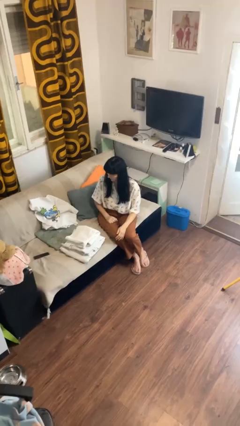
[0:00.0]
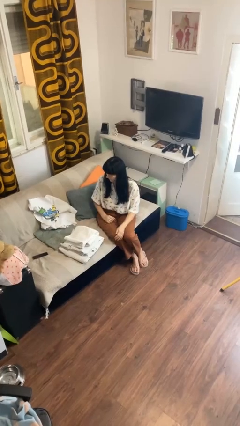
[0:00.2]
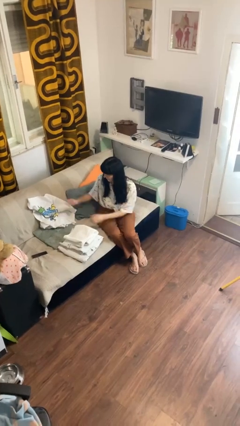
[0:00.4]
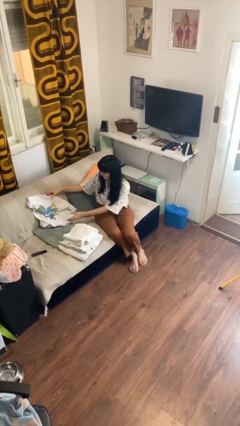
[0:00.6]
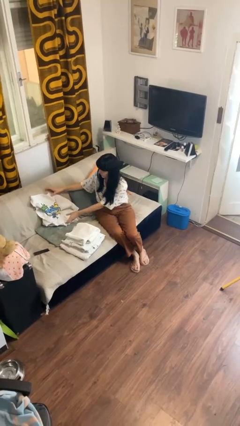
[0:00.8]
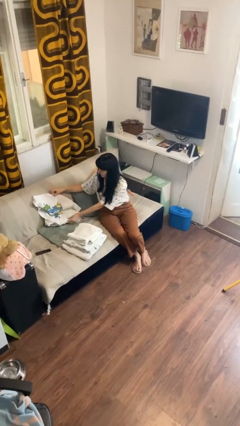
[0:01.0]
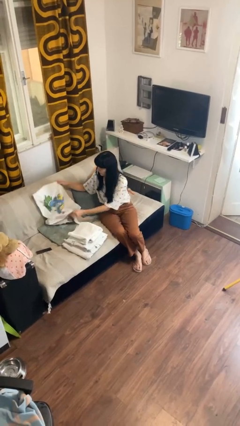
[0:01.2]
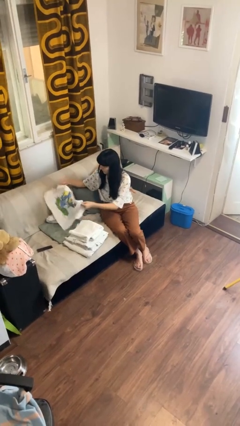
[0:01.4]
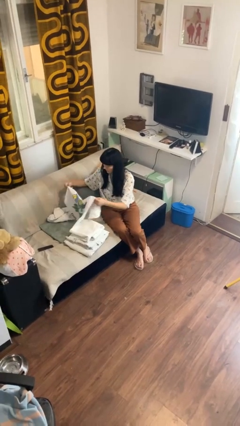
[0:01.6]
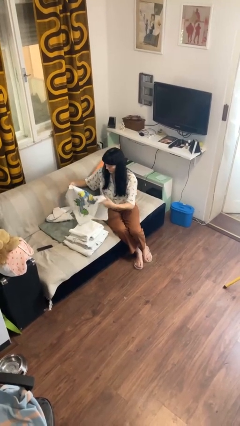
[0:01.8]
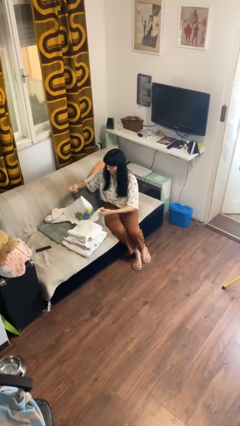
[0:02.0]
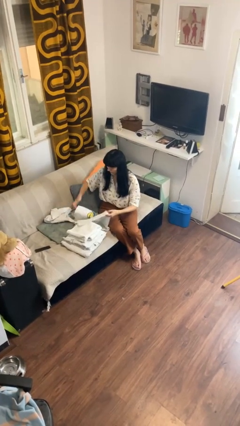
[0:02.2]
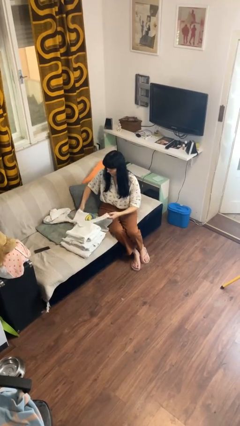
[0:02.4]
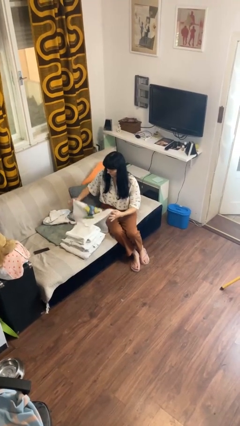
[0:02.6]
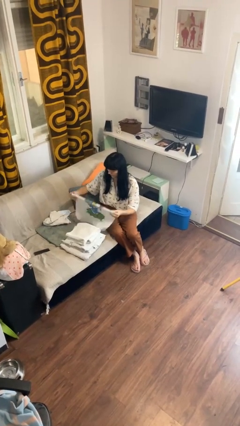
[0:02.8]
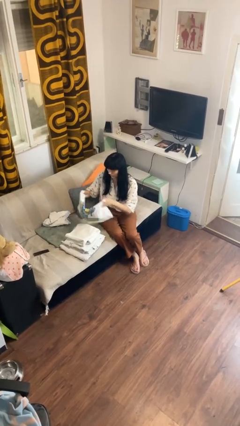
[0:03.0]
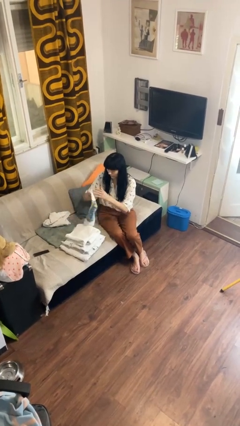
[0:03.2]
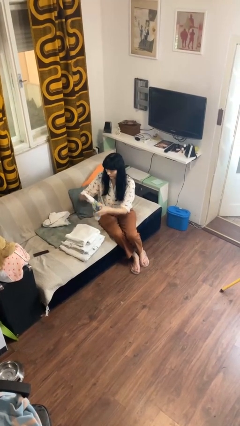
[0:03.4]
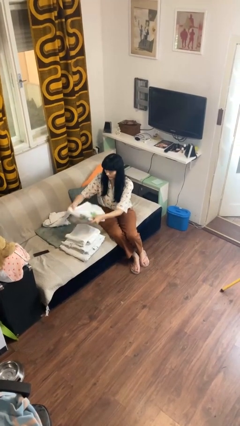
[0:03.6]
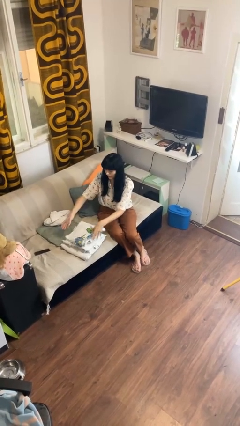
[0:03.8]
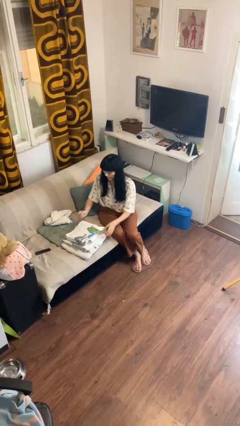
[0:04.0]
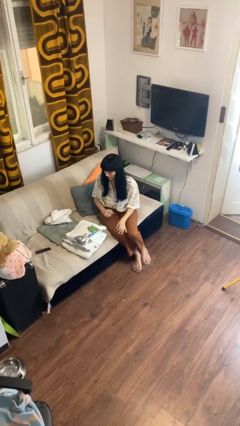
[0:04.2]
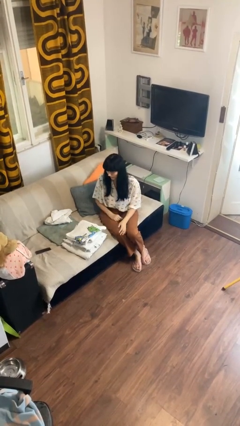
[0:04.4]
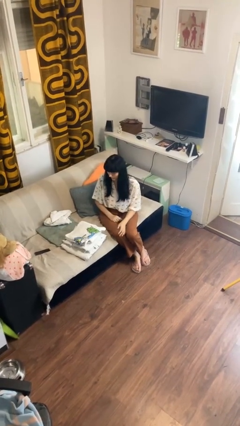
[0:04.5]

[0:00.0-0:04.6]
person folds towel

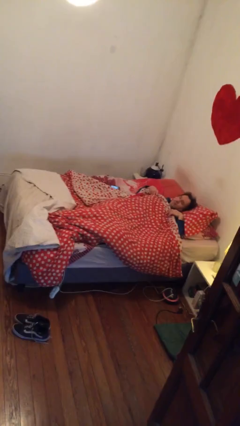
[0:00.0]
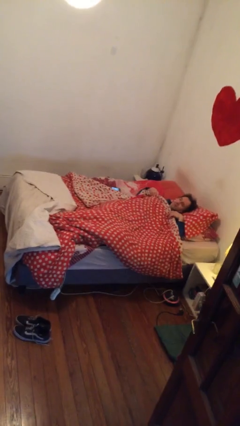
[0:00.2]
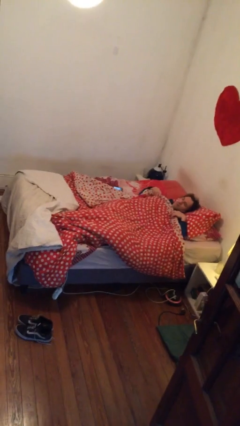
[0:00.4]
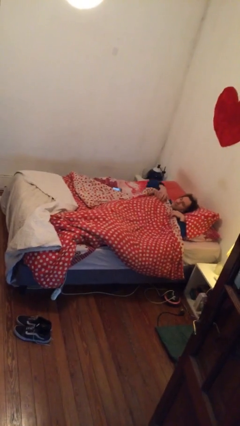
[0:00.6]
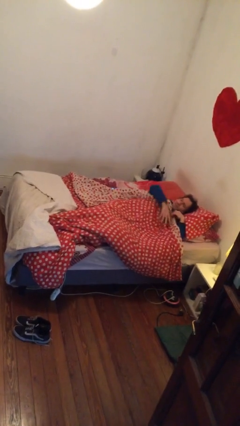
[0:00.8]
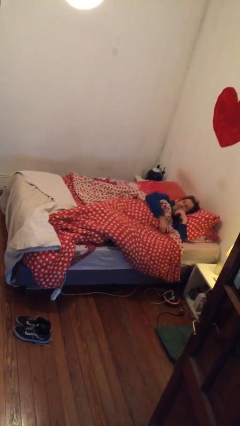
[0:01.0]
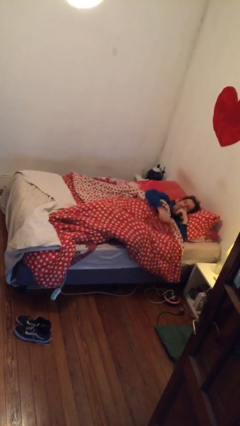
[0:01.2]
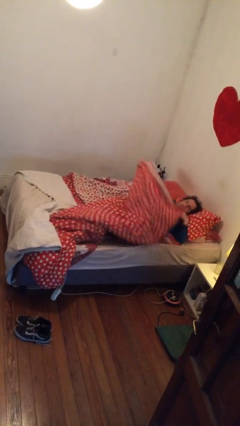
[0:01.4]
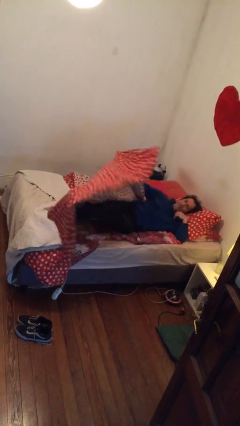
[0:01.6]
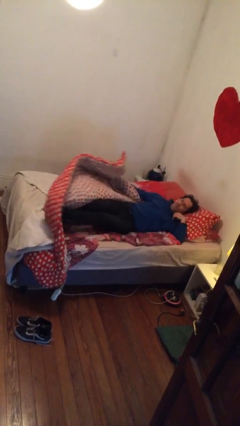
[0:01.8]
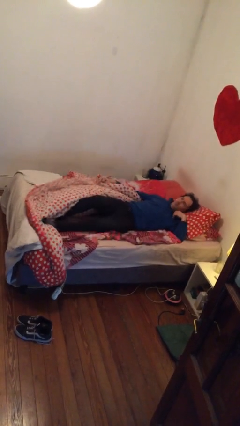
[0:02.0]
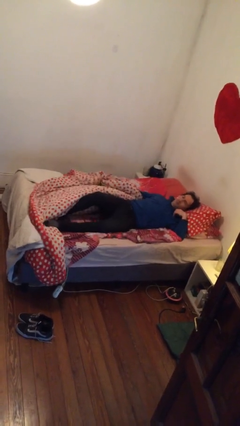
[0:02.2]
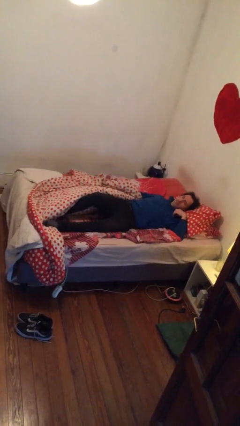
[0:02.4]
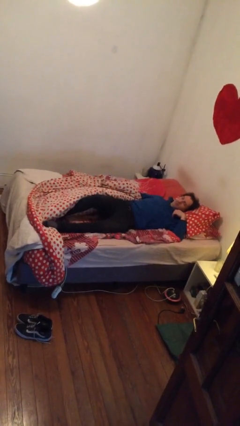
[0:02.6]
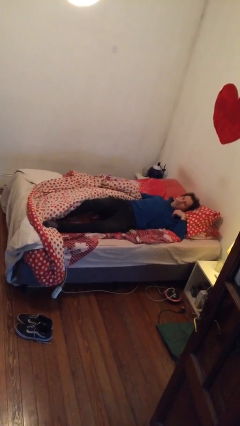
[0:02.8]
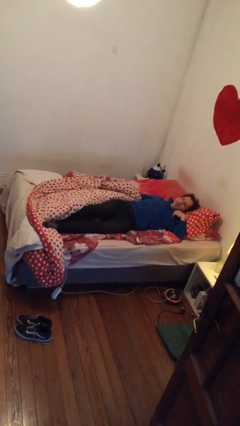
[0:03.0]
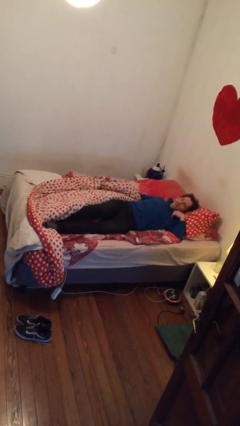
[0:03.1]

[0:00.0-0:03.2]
person uncovers with bedsheets

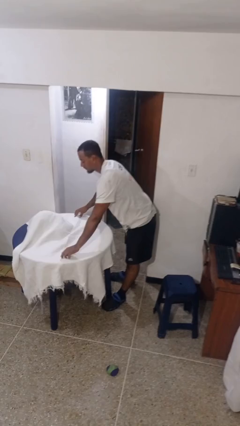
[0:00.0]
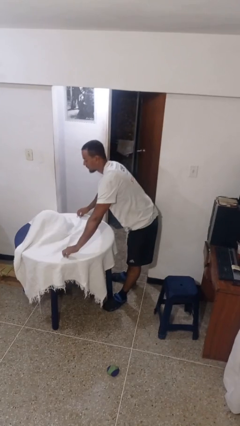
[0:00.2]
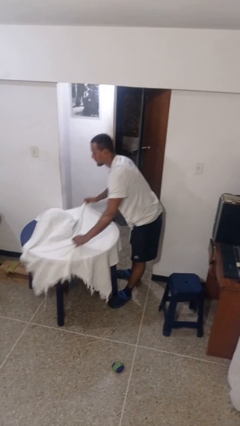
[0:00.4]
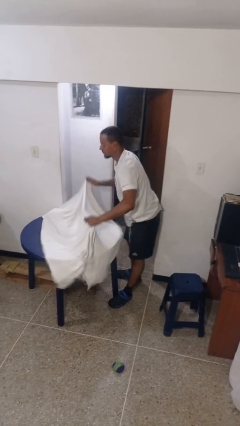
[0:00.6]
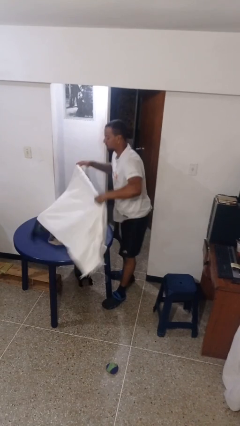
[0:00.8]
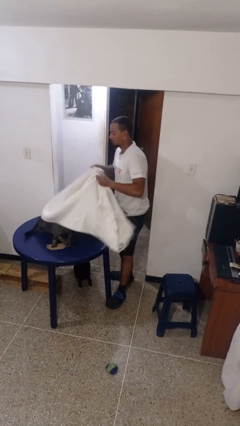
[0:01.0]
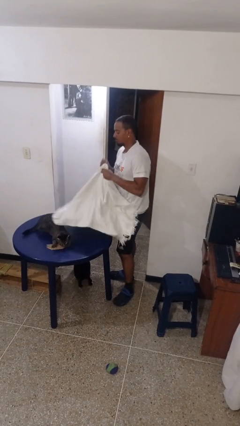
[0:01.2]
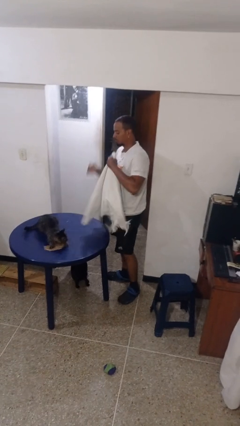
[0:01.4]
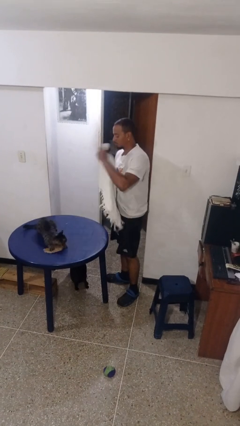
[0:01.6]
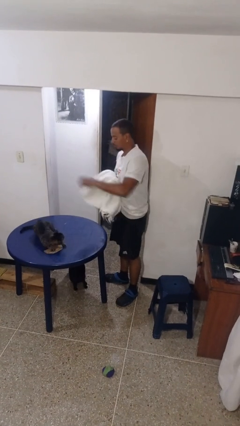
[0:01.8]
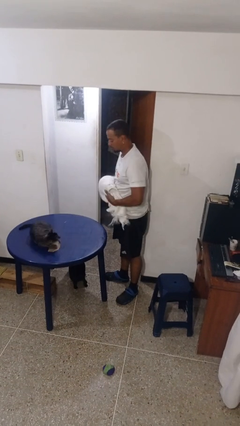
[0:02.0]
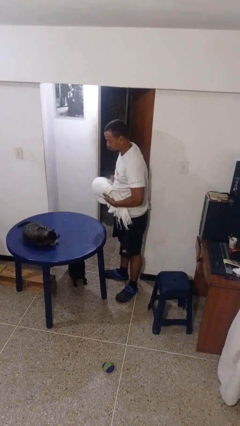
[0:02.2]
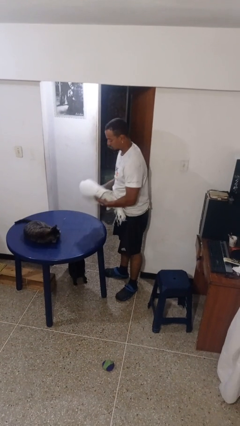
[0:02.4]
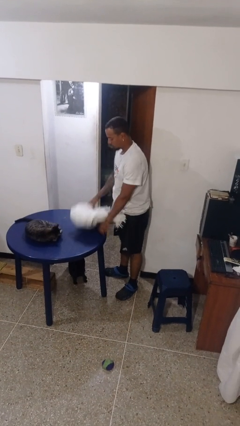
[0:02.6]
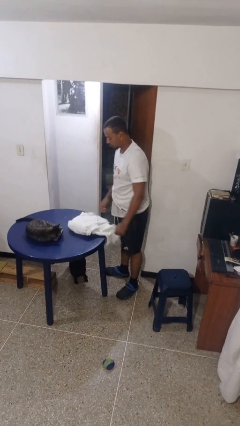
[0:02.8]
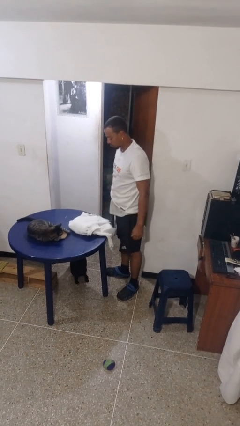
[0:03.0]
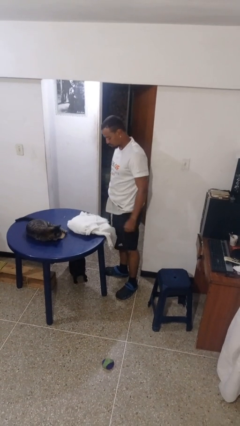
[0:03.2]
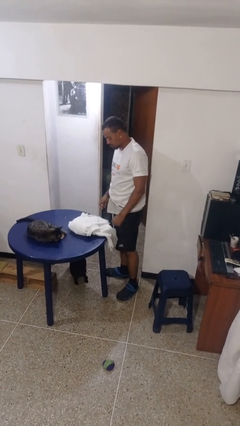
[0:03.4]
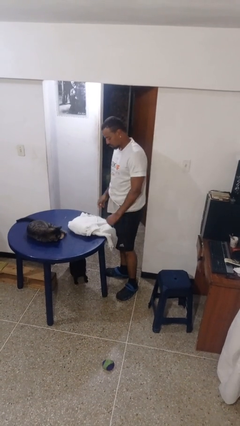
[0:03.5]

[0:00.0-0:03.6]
person folds tablecloth

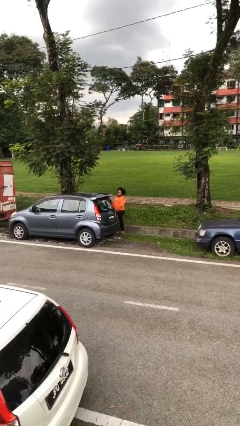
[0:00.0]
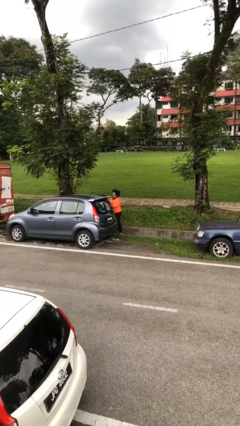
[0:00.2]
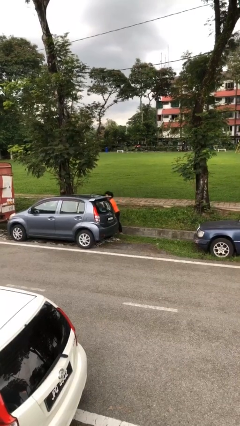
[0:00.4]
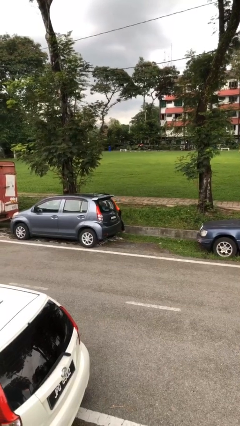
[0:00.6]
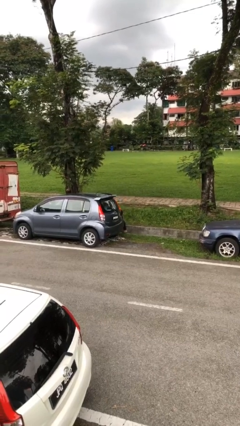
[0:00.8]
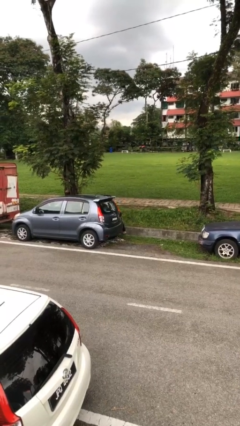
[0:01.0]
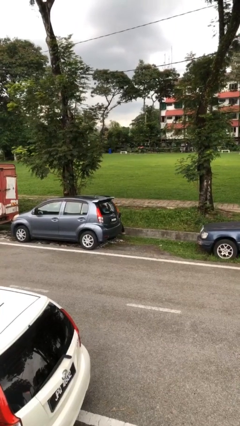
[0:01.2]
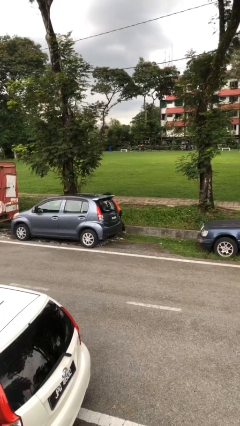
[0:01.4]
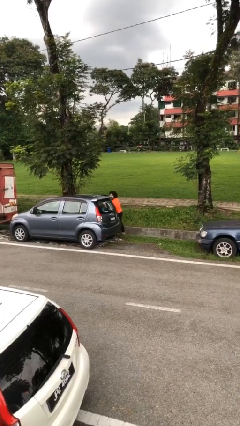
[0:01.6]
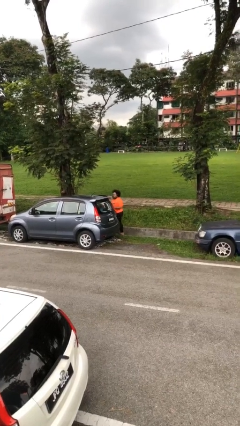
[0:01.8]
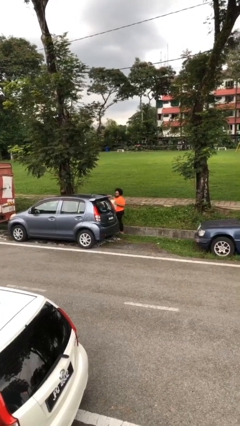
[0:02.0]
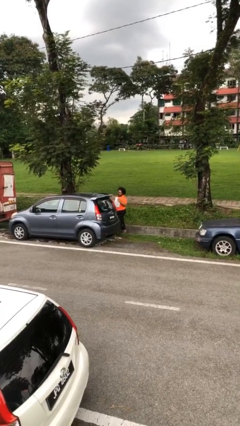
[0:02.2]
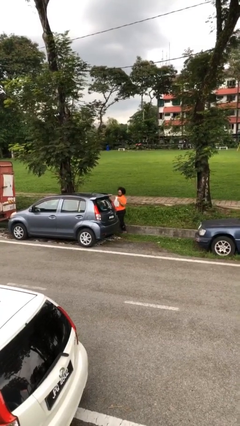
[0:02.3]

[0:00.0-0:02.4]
person unloads car

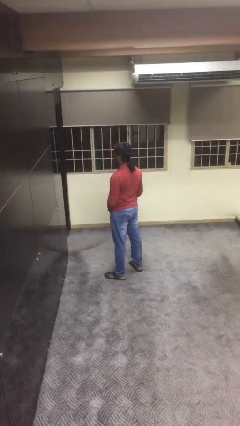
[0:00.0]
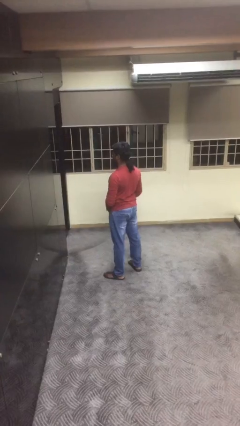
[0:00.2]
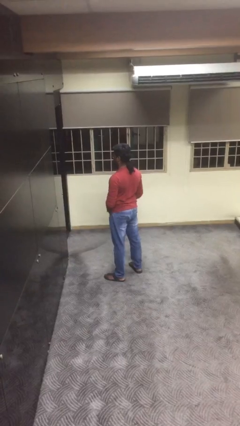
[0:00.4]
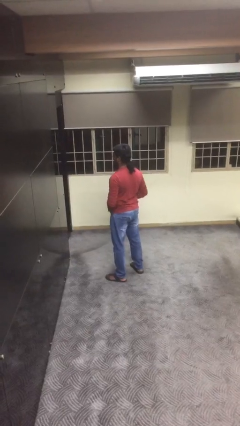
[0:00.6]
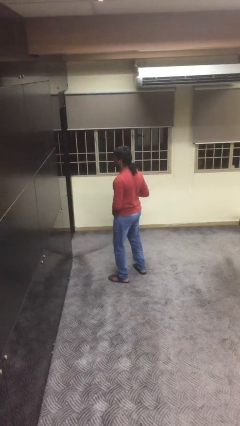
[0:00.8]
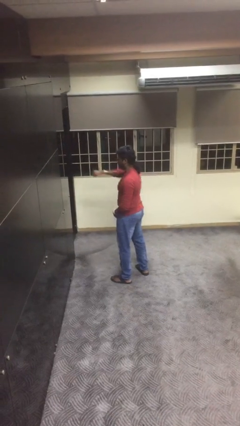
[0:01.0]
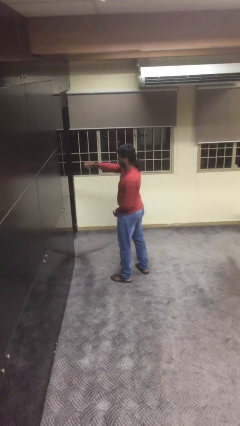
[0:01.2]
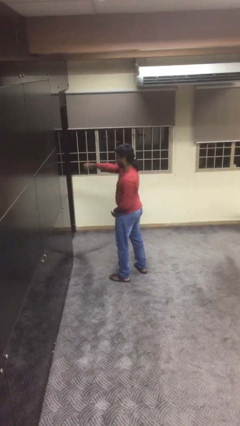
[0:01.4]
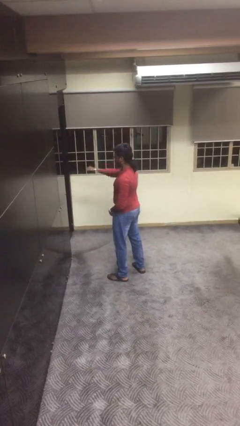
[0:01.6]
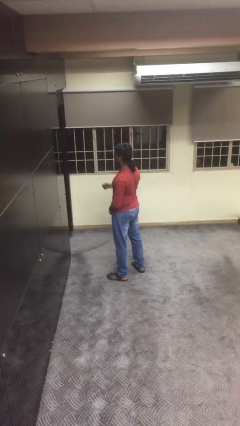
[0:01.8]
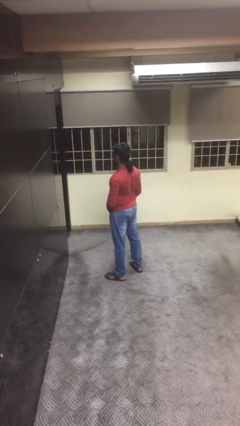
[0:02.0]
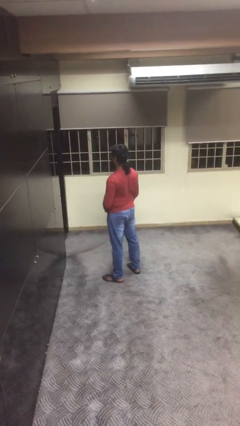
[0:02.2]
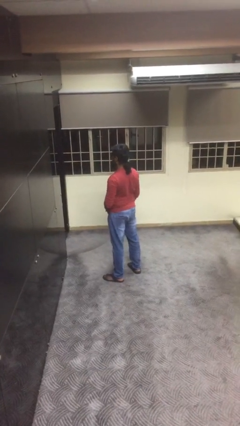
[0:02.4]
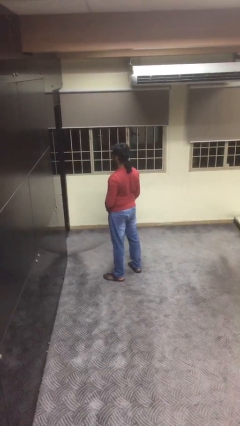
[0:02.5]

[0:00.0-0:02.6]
person punches

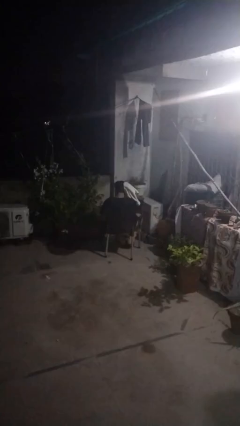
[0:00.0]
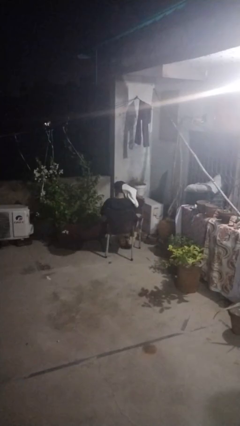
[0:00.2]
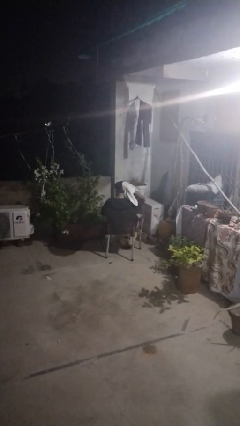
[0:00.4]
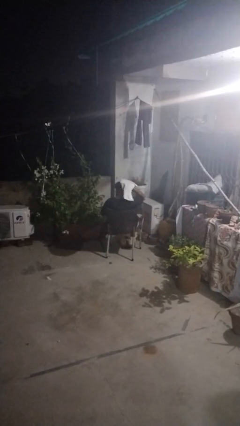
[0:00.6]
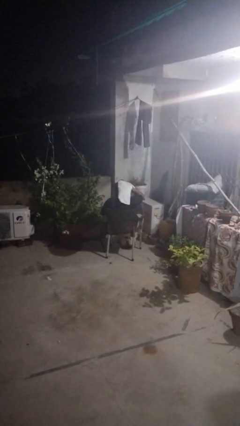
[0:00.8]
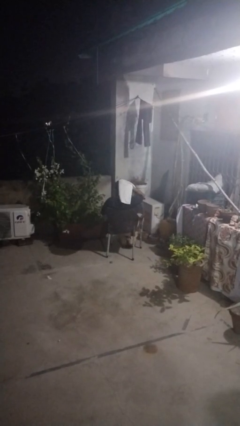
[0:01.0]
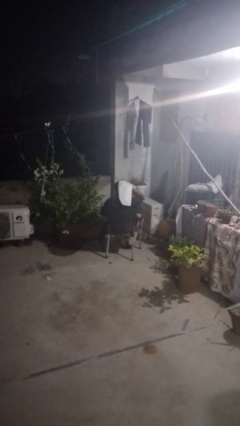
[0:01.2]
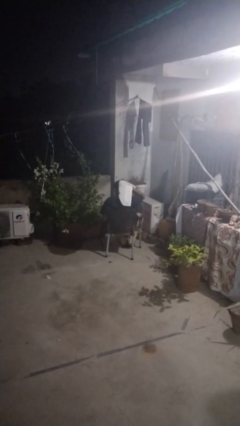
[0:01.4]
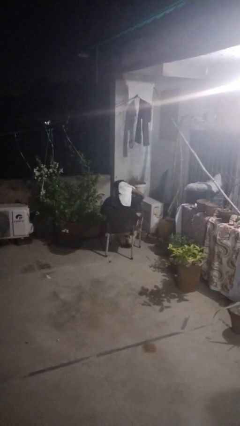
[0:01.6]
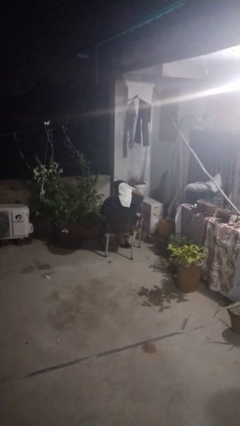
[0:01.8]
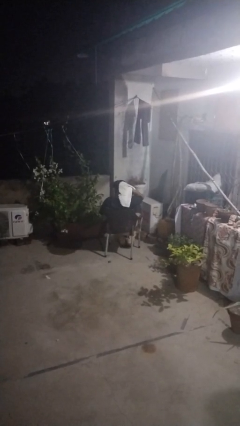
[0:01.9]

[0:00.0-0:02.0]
person dries hair with towel
